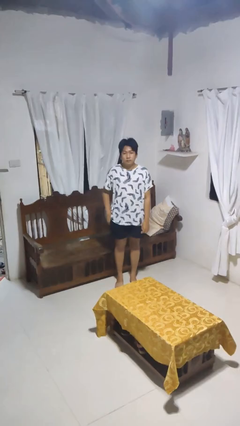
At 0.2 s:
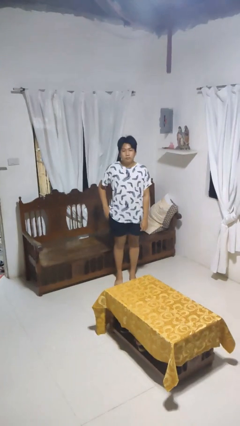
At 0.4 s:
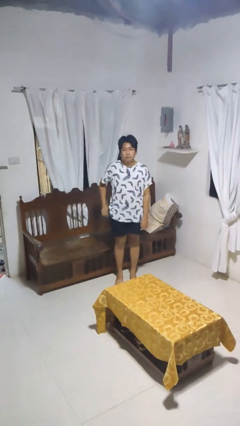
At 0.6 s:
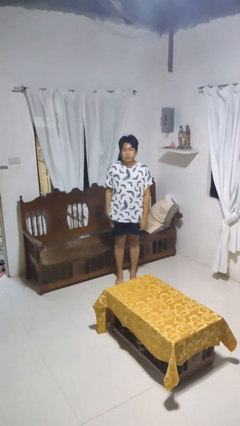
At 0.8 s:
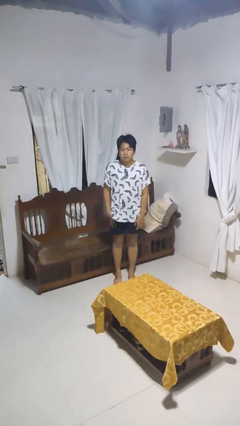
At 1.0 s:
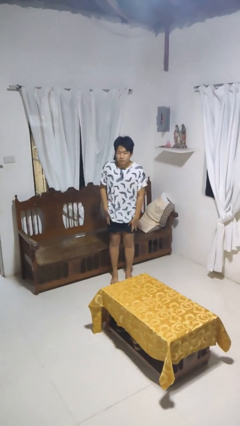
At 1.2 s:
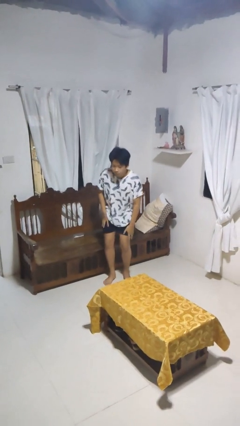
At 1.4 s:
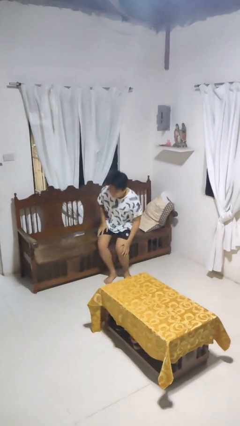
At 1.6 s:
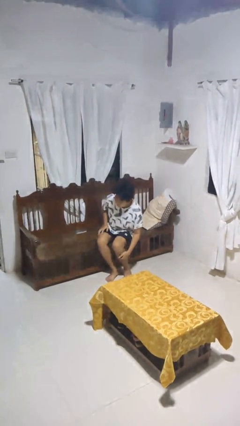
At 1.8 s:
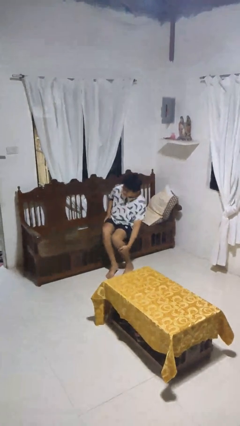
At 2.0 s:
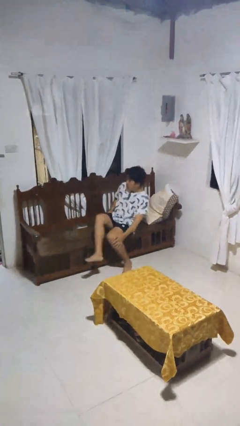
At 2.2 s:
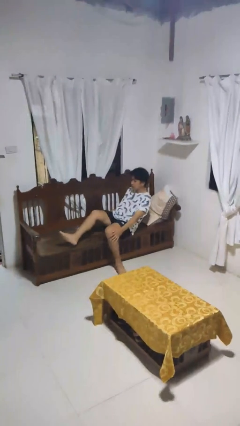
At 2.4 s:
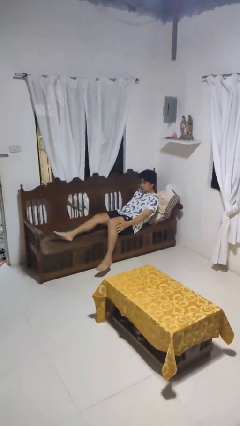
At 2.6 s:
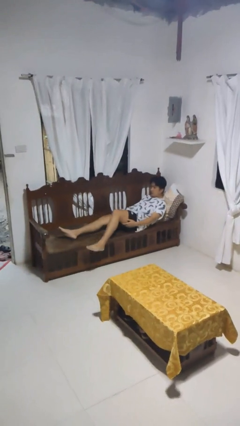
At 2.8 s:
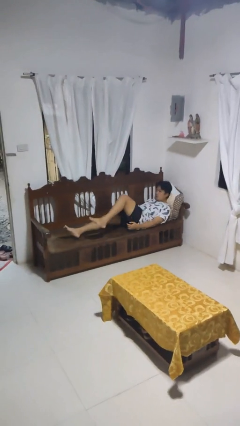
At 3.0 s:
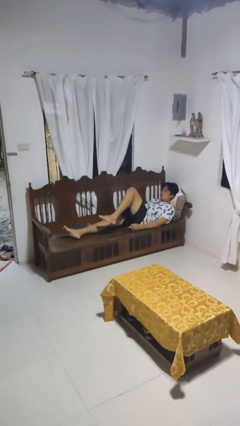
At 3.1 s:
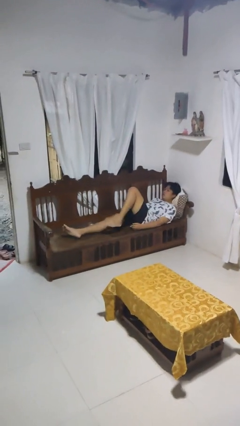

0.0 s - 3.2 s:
person lies down on couch

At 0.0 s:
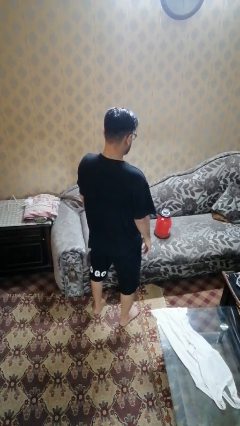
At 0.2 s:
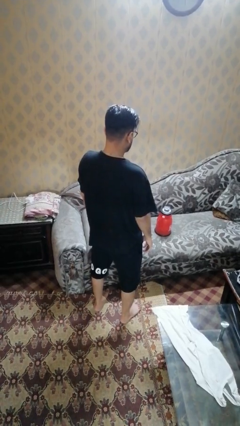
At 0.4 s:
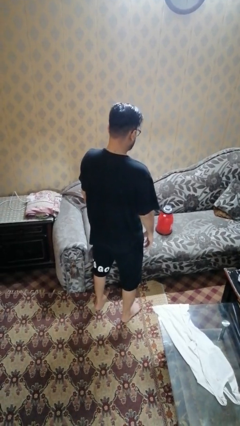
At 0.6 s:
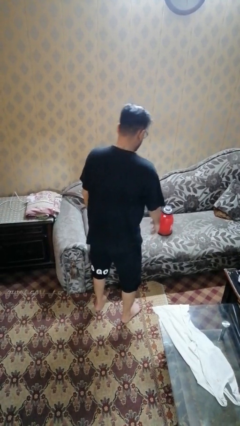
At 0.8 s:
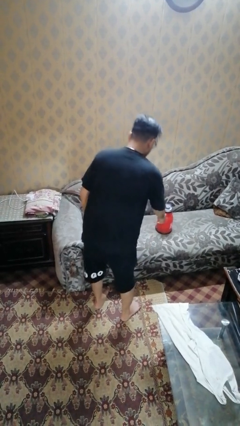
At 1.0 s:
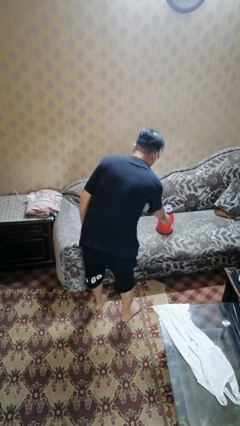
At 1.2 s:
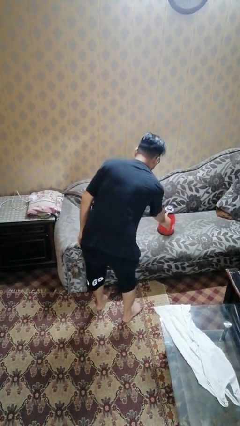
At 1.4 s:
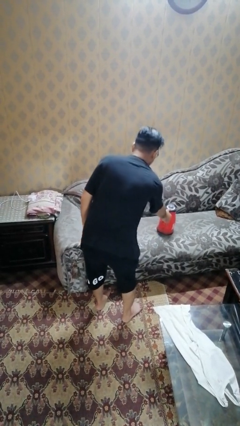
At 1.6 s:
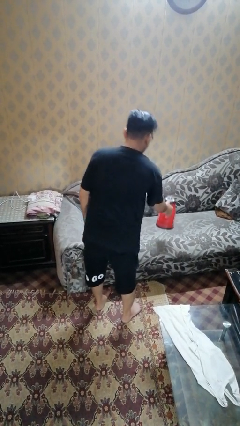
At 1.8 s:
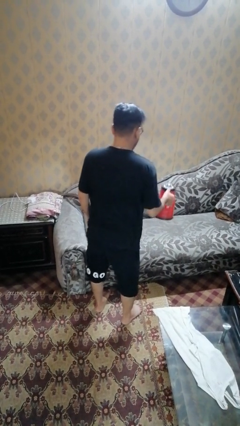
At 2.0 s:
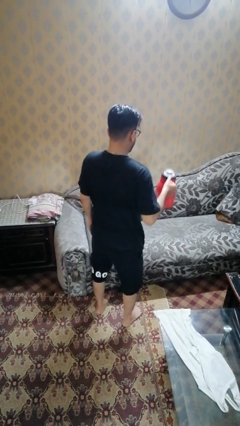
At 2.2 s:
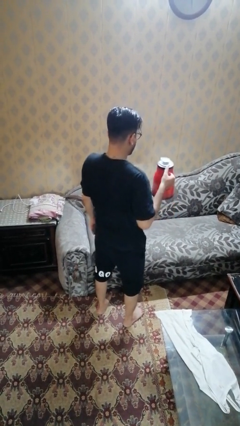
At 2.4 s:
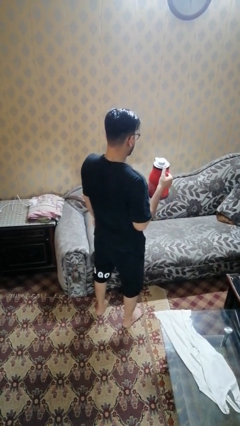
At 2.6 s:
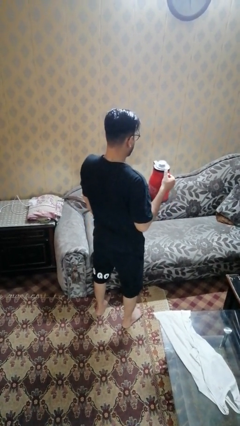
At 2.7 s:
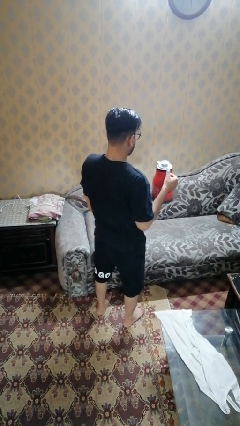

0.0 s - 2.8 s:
person picks up object from couch

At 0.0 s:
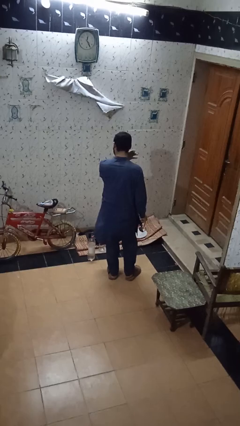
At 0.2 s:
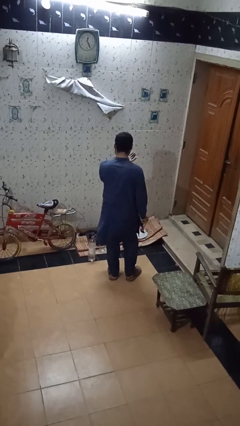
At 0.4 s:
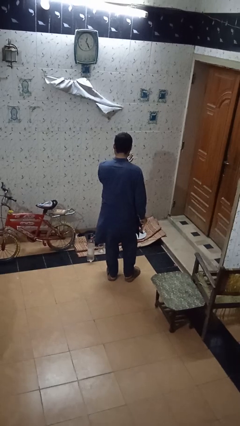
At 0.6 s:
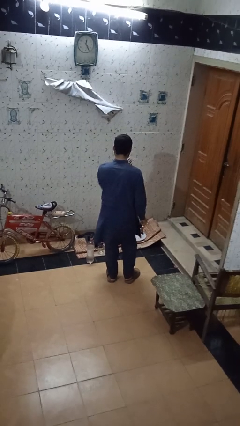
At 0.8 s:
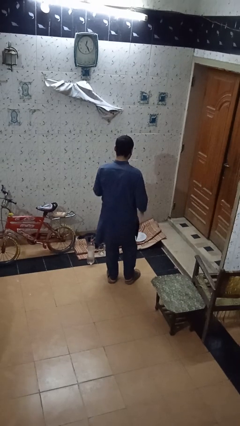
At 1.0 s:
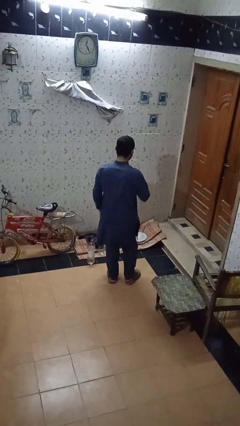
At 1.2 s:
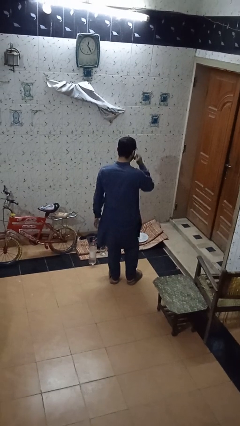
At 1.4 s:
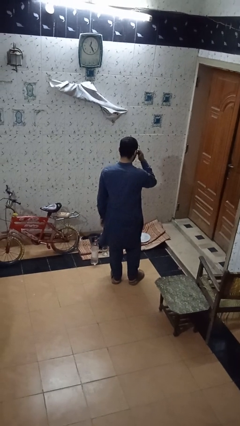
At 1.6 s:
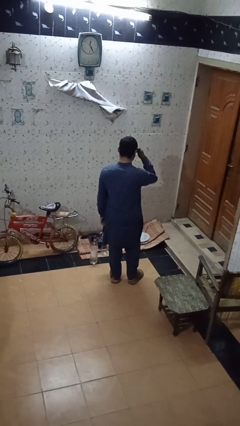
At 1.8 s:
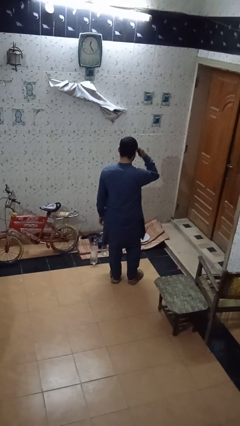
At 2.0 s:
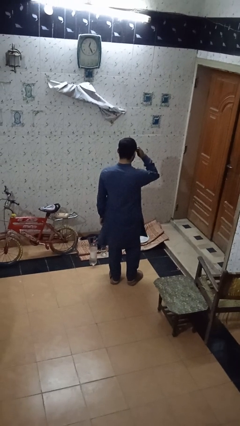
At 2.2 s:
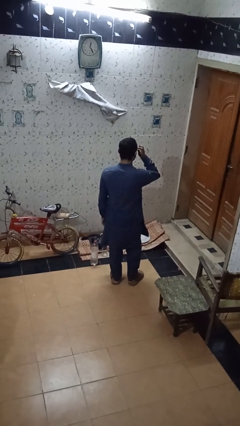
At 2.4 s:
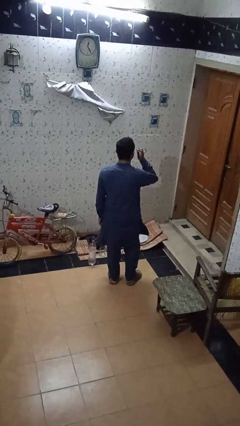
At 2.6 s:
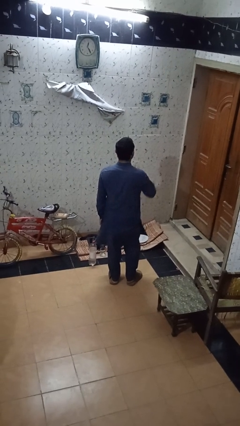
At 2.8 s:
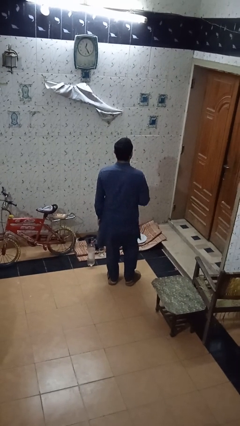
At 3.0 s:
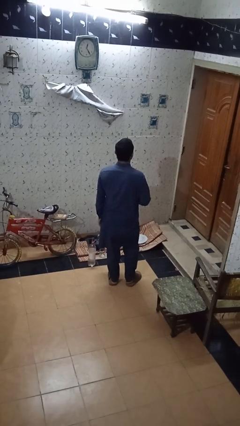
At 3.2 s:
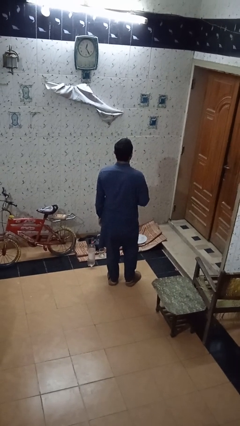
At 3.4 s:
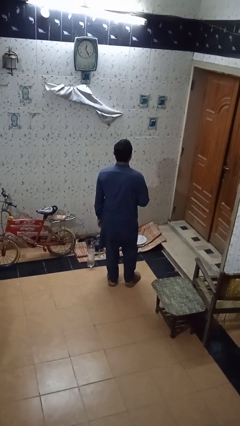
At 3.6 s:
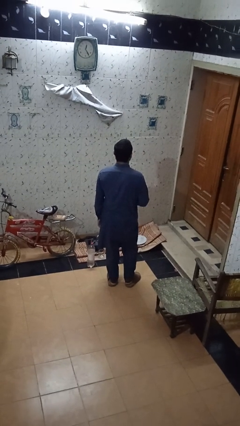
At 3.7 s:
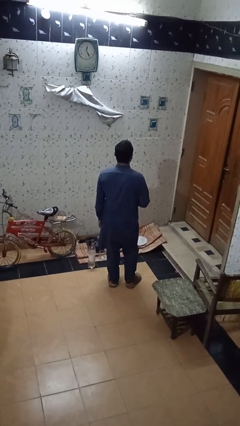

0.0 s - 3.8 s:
person puts on sunglasses

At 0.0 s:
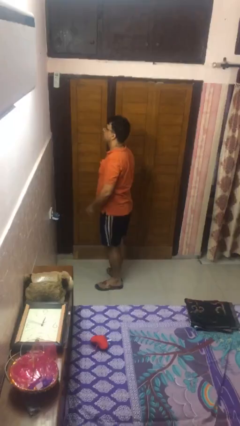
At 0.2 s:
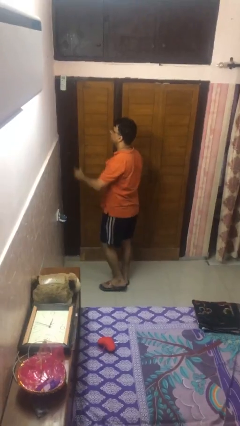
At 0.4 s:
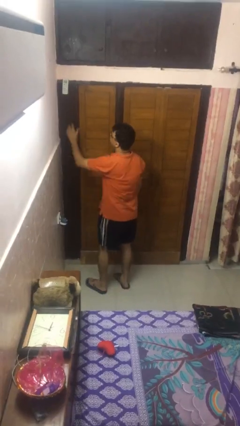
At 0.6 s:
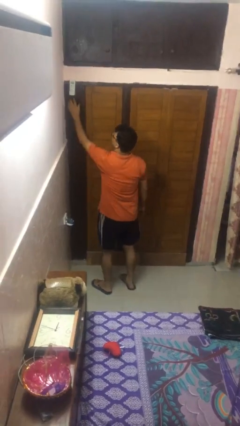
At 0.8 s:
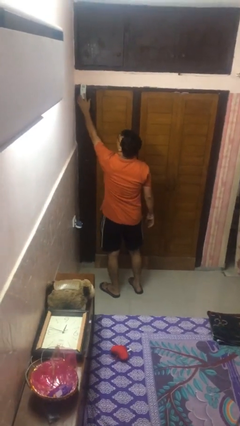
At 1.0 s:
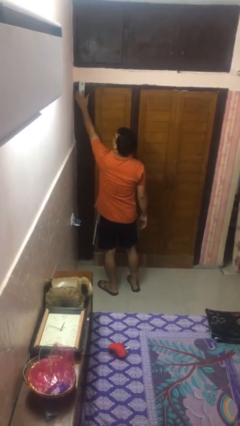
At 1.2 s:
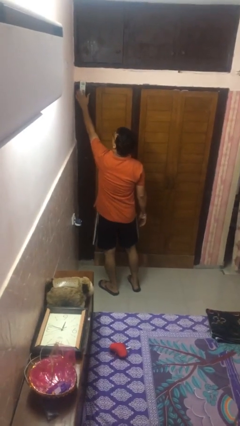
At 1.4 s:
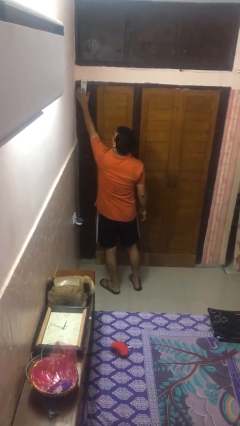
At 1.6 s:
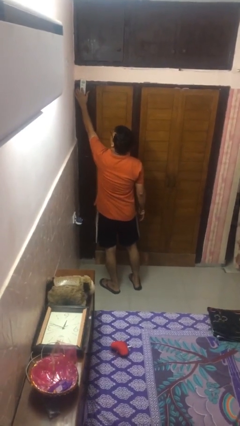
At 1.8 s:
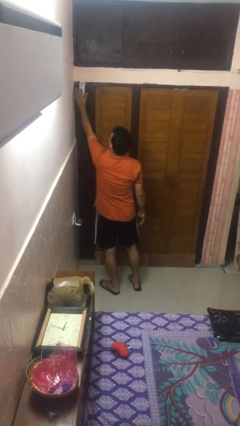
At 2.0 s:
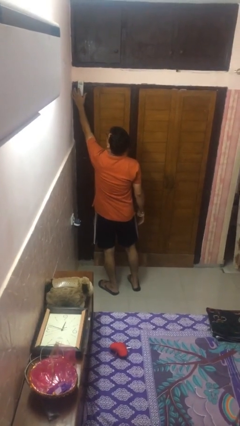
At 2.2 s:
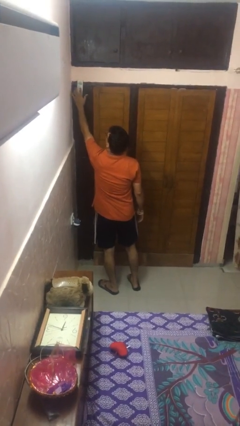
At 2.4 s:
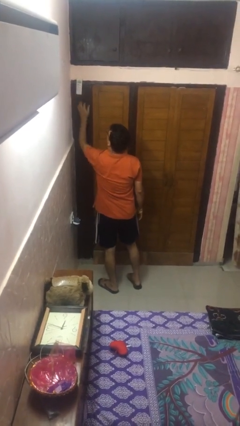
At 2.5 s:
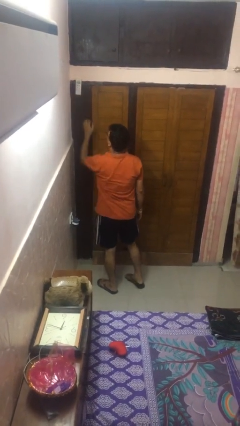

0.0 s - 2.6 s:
person adjusts thermostat

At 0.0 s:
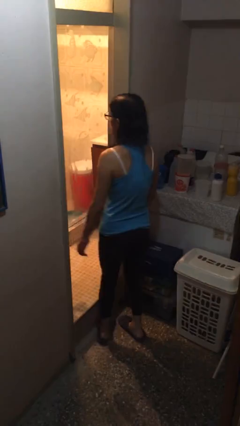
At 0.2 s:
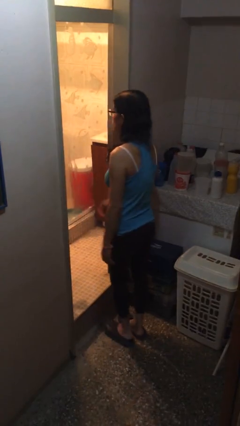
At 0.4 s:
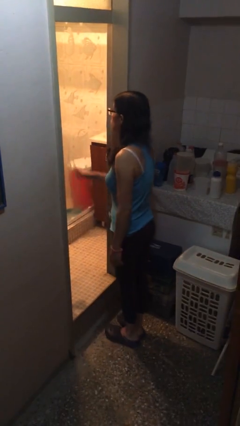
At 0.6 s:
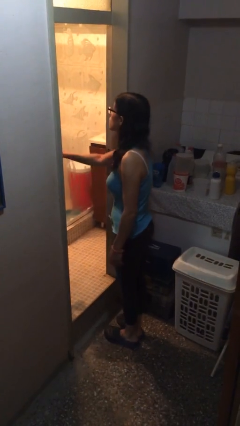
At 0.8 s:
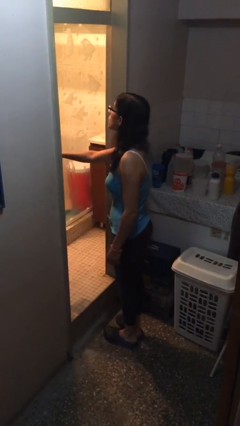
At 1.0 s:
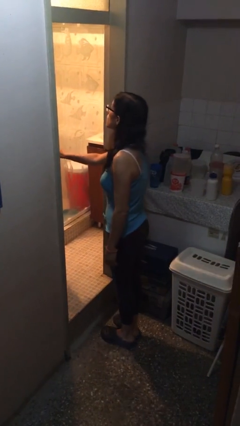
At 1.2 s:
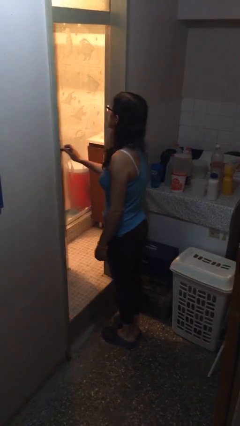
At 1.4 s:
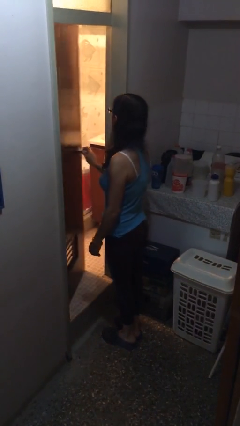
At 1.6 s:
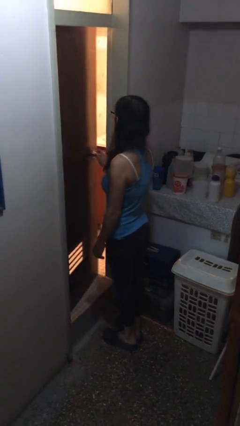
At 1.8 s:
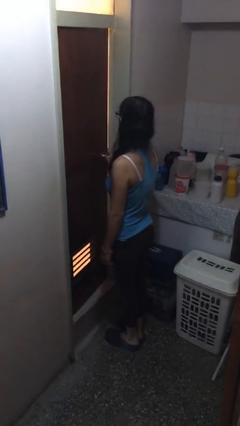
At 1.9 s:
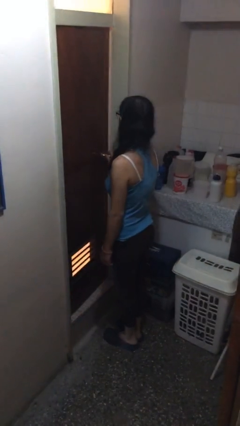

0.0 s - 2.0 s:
person closes facility door

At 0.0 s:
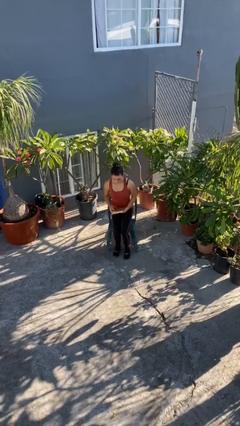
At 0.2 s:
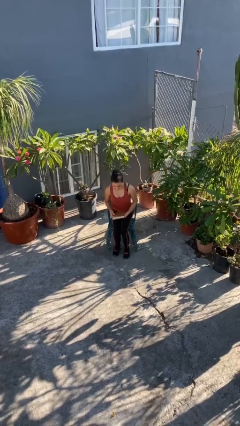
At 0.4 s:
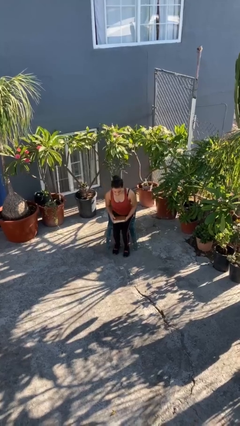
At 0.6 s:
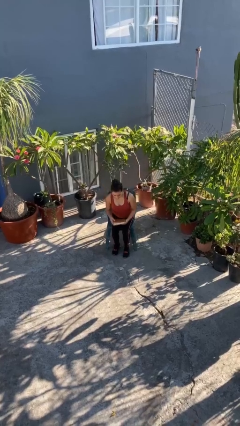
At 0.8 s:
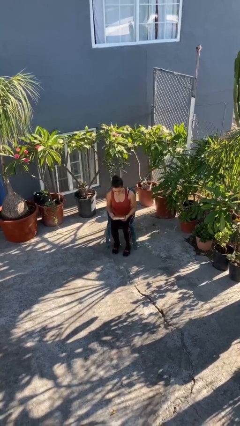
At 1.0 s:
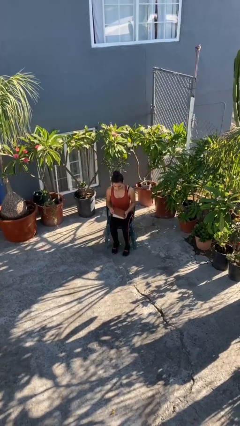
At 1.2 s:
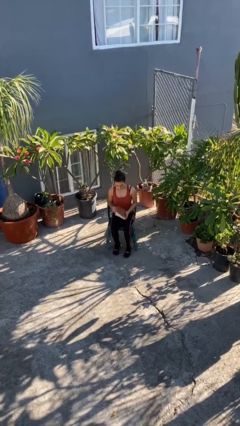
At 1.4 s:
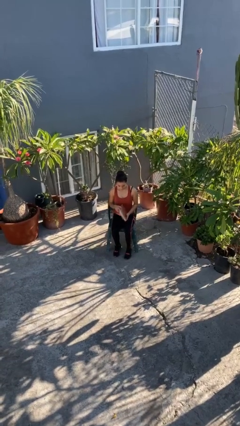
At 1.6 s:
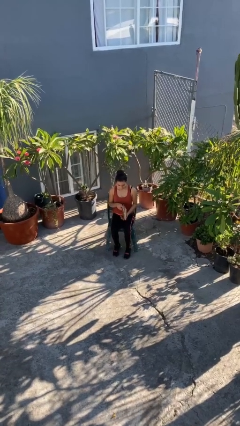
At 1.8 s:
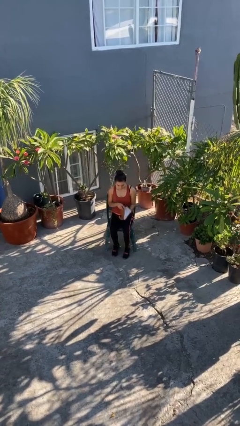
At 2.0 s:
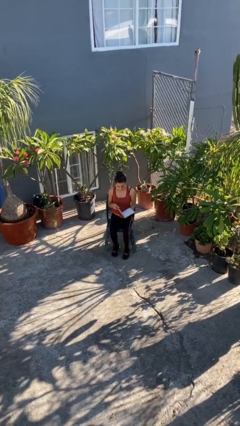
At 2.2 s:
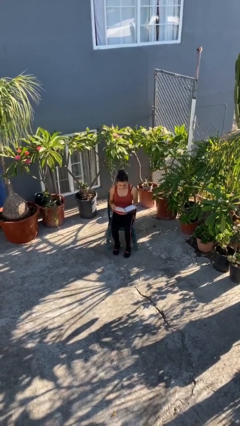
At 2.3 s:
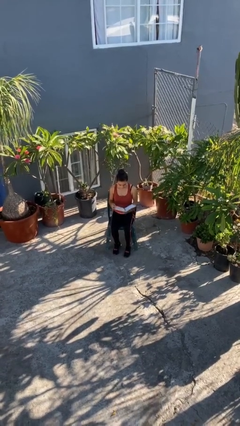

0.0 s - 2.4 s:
person sits down

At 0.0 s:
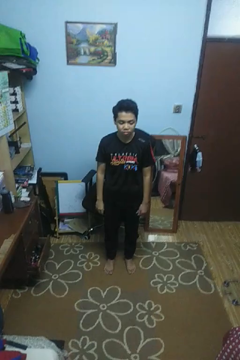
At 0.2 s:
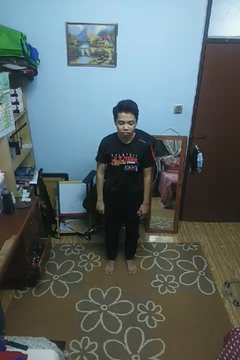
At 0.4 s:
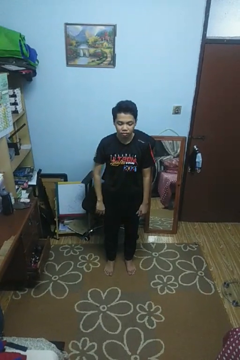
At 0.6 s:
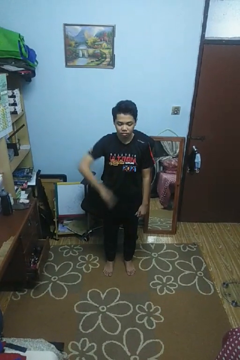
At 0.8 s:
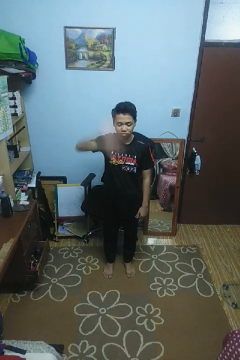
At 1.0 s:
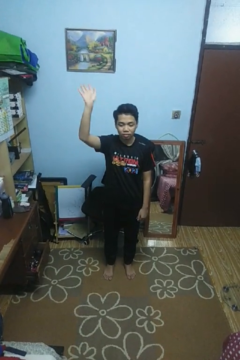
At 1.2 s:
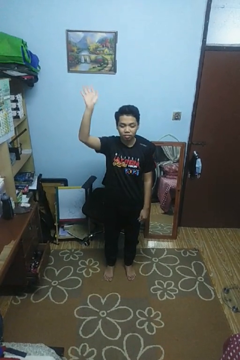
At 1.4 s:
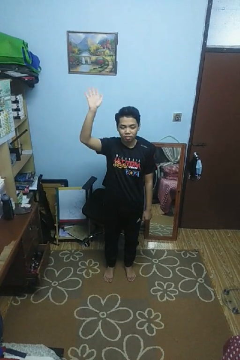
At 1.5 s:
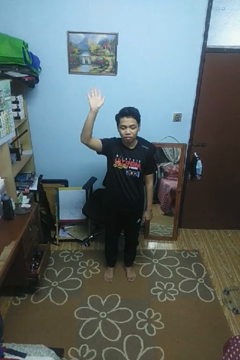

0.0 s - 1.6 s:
person gestures swipe up
